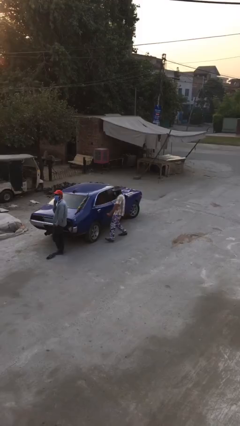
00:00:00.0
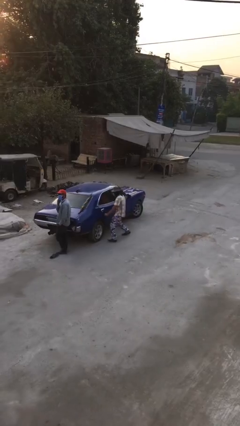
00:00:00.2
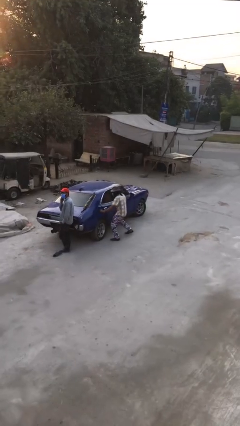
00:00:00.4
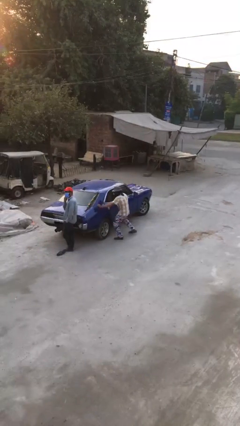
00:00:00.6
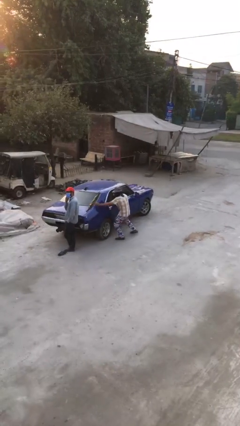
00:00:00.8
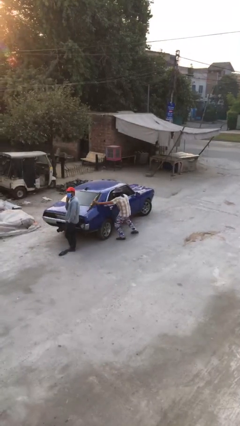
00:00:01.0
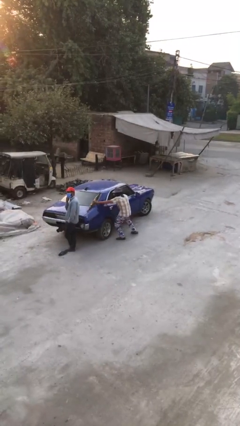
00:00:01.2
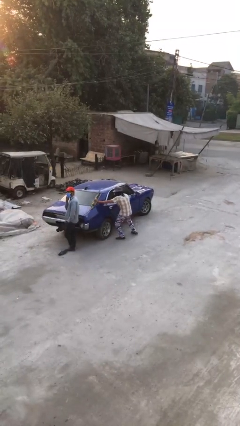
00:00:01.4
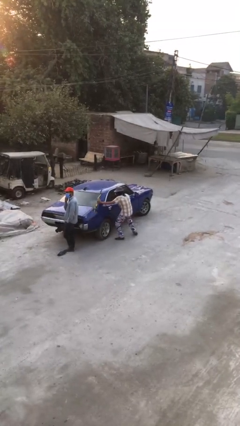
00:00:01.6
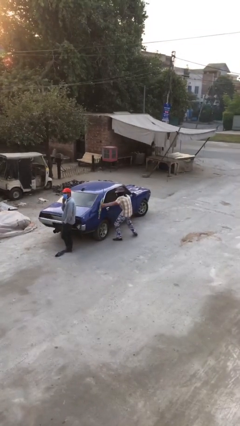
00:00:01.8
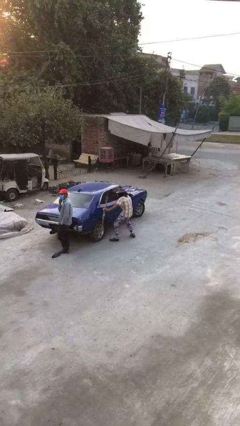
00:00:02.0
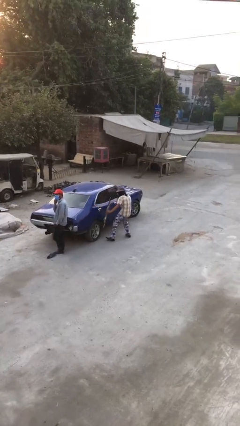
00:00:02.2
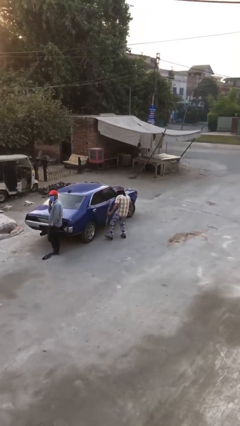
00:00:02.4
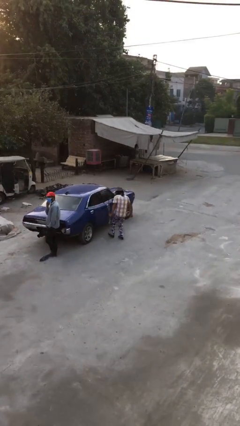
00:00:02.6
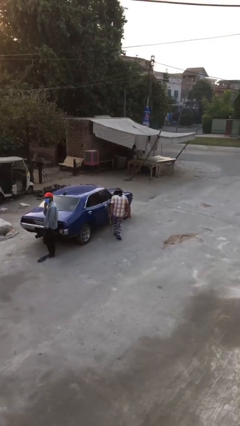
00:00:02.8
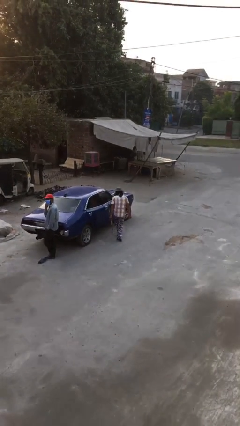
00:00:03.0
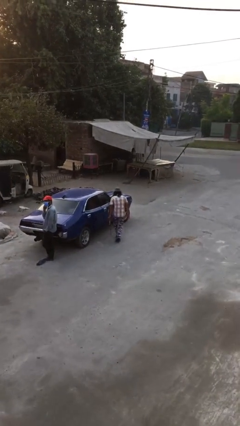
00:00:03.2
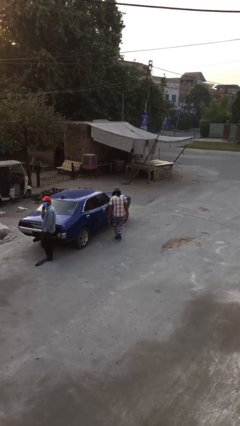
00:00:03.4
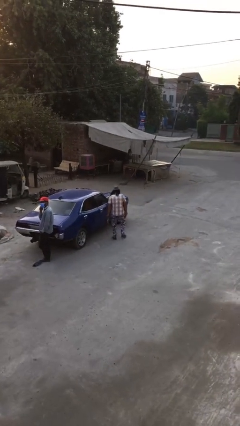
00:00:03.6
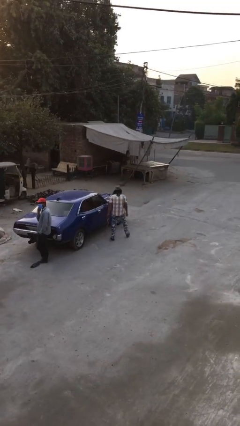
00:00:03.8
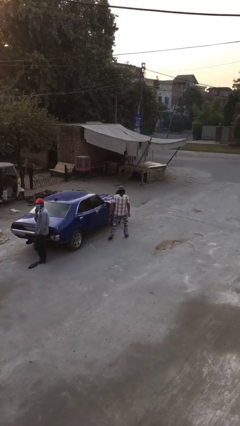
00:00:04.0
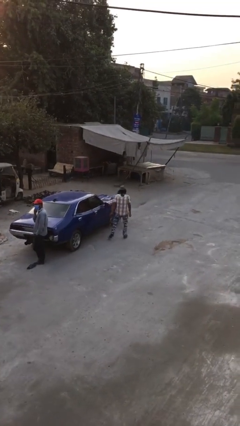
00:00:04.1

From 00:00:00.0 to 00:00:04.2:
person steals object from person

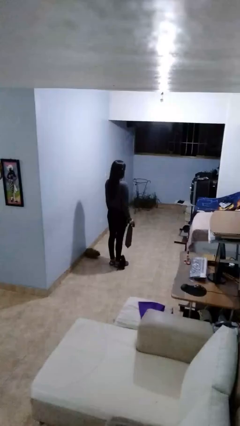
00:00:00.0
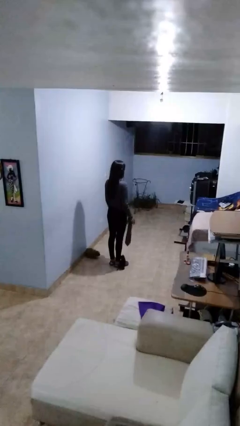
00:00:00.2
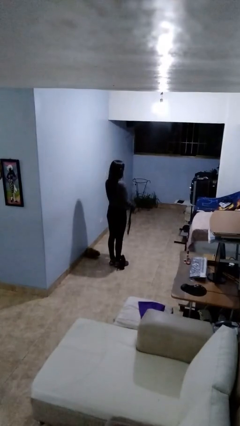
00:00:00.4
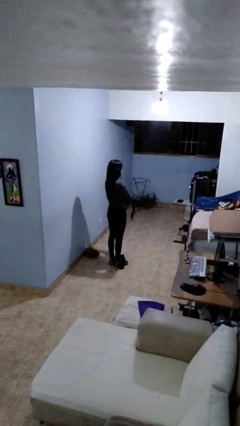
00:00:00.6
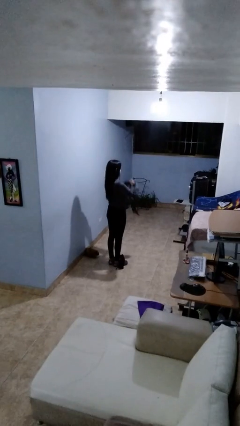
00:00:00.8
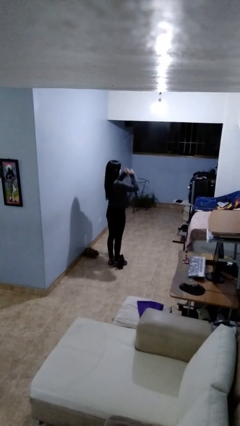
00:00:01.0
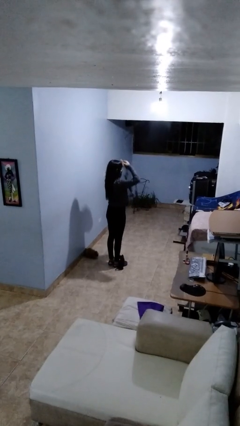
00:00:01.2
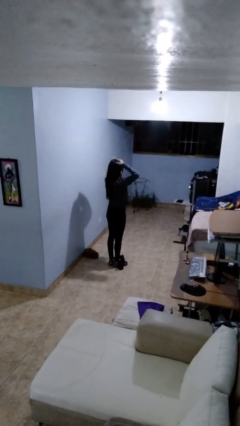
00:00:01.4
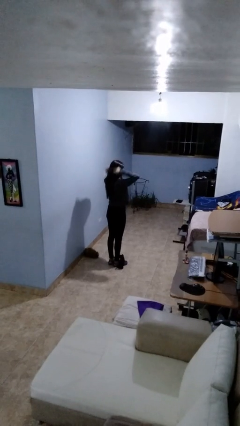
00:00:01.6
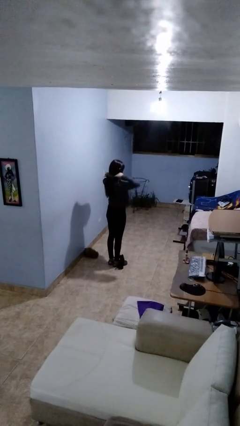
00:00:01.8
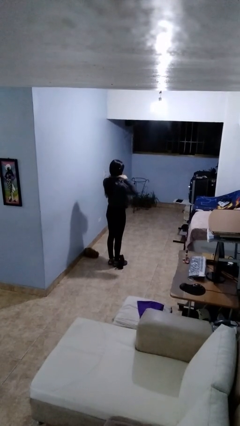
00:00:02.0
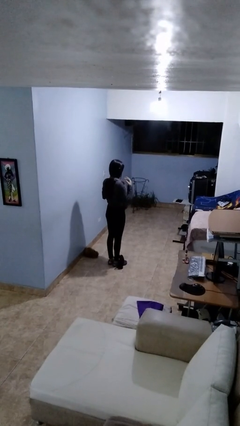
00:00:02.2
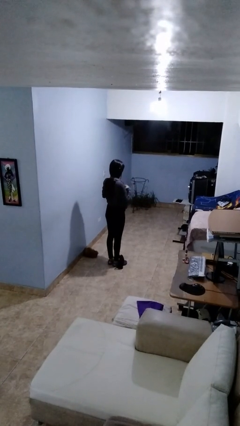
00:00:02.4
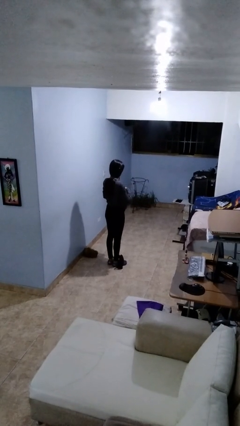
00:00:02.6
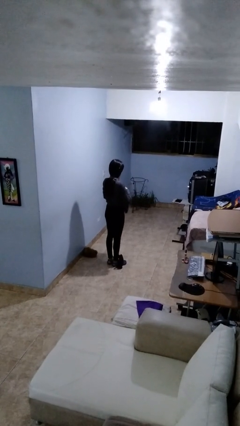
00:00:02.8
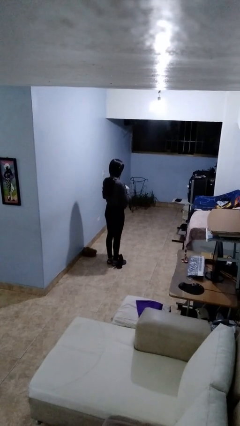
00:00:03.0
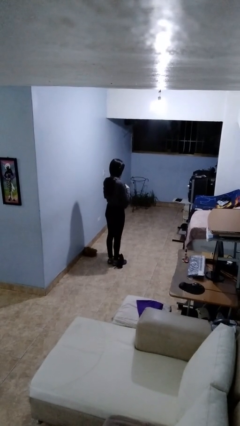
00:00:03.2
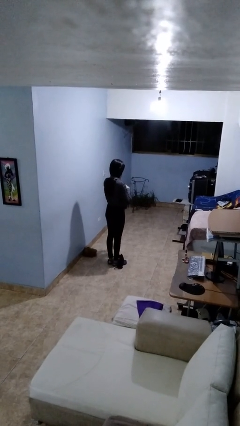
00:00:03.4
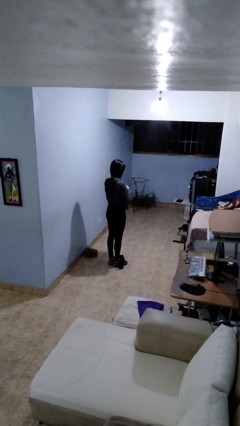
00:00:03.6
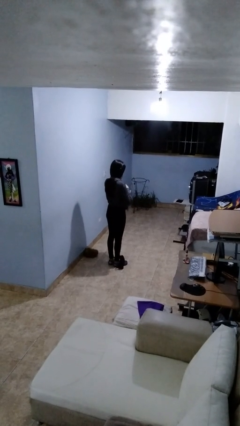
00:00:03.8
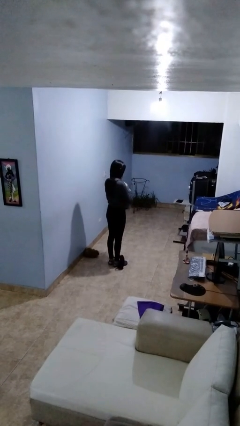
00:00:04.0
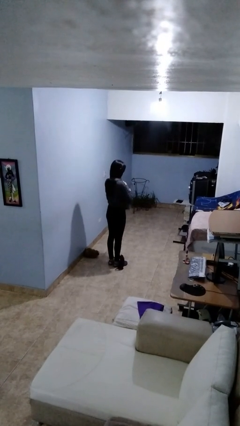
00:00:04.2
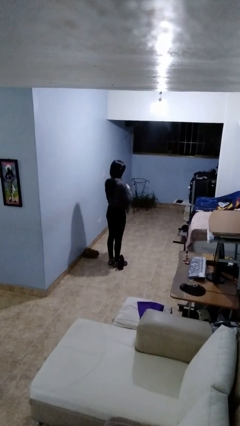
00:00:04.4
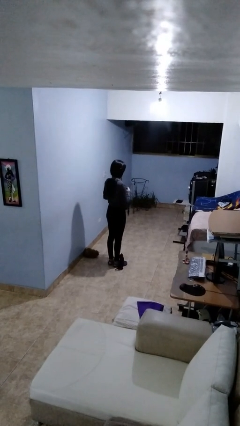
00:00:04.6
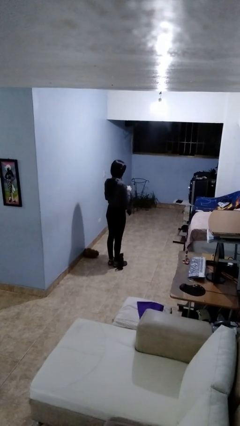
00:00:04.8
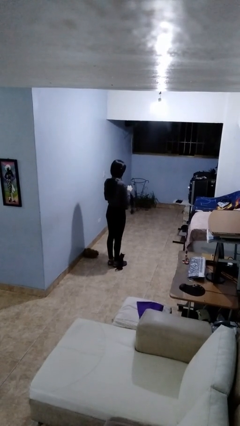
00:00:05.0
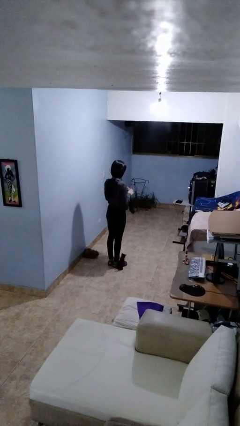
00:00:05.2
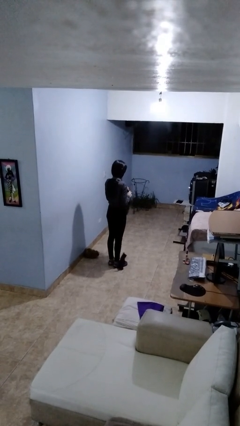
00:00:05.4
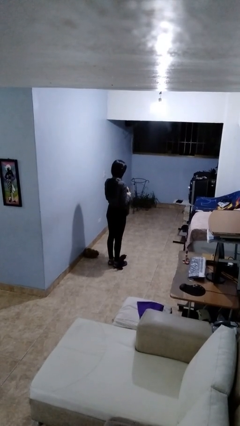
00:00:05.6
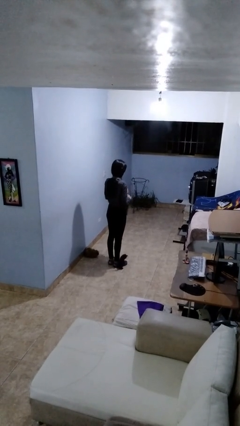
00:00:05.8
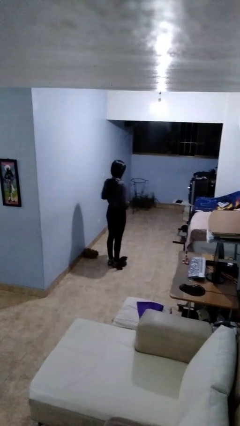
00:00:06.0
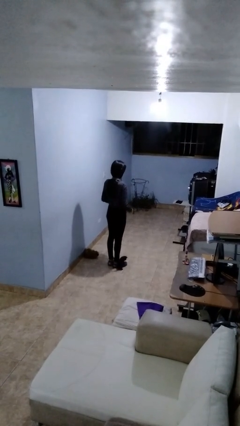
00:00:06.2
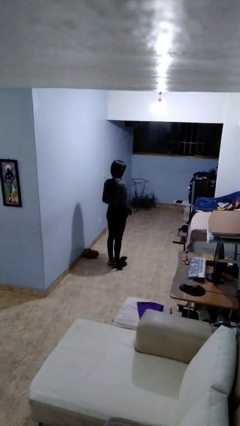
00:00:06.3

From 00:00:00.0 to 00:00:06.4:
person puts on necktie

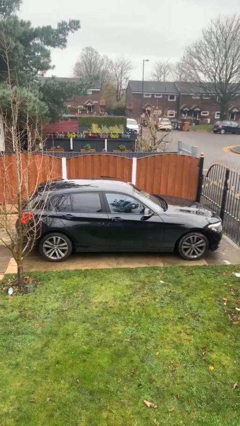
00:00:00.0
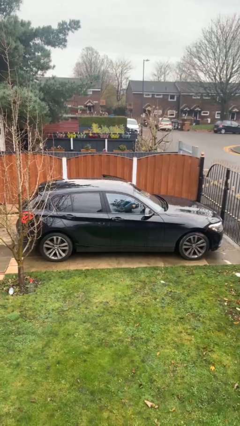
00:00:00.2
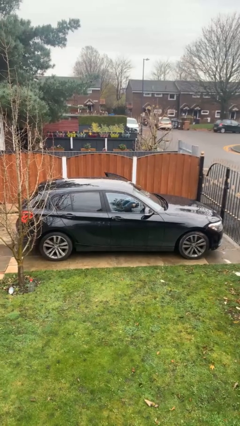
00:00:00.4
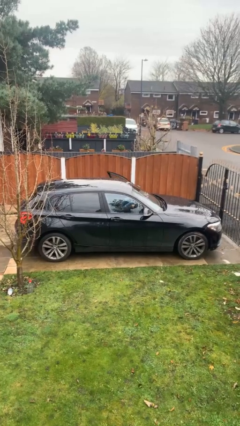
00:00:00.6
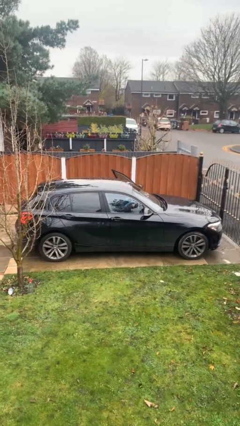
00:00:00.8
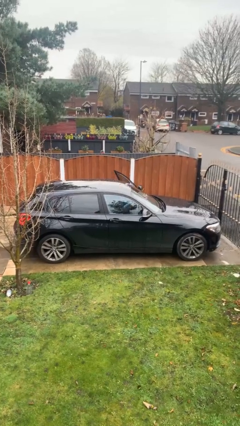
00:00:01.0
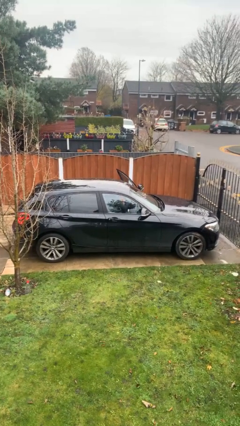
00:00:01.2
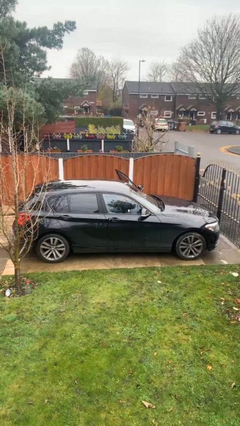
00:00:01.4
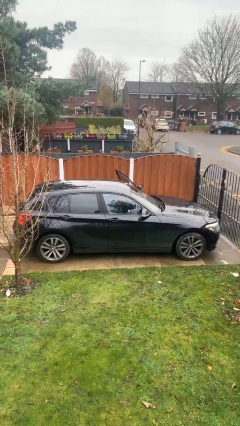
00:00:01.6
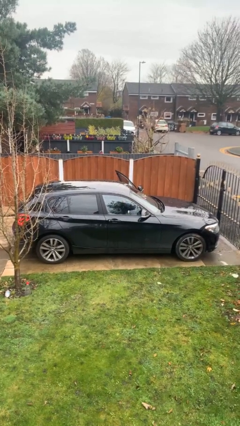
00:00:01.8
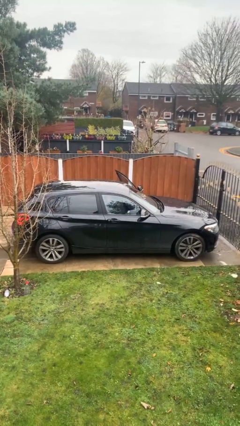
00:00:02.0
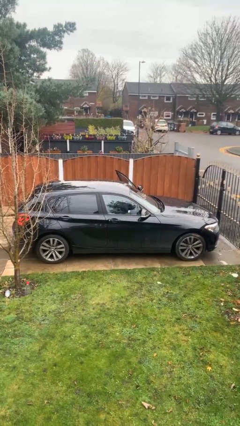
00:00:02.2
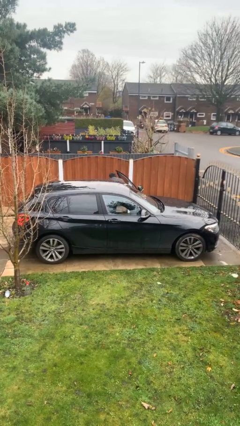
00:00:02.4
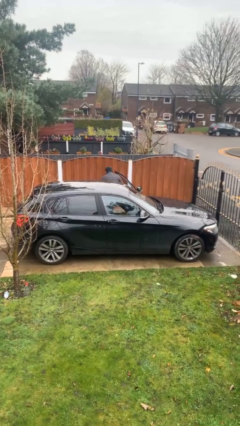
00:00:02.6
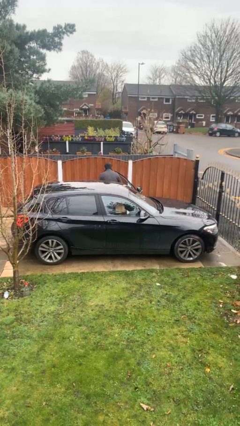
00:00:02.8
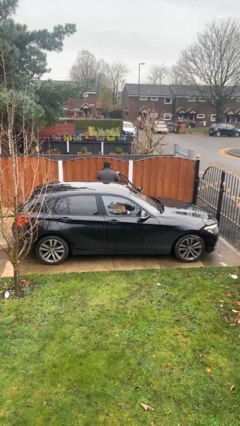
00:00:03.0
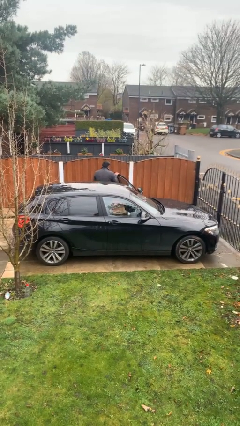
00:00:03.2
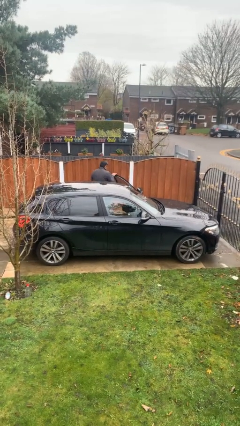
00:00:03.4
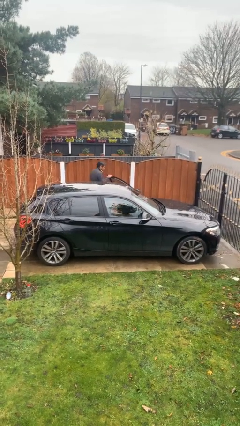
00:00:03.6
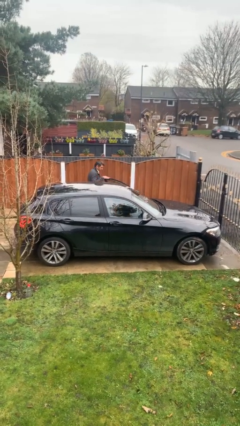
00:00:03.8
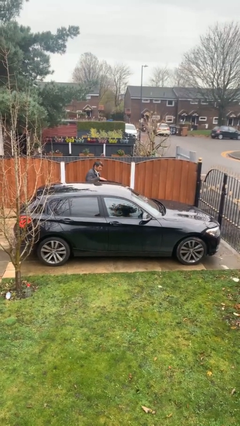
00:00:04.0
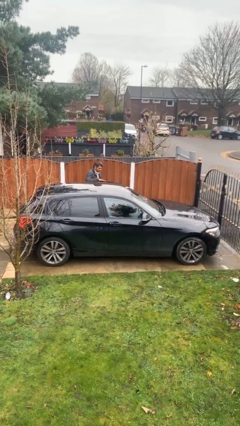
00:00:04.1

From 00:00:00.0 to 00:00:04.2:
car drops off person

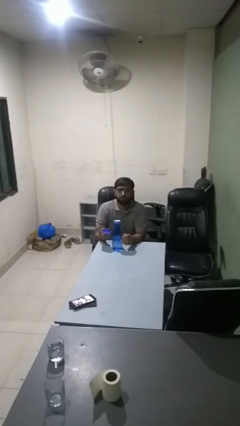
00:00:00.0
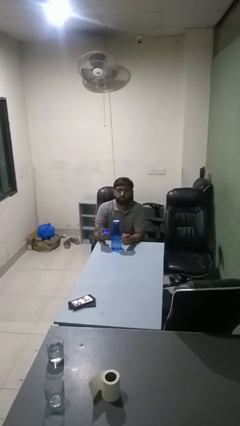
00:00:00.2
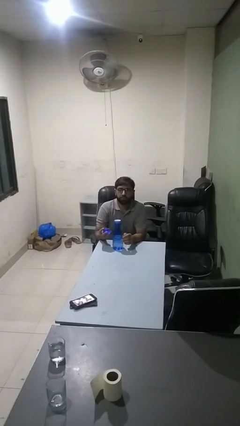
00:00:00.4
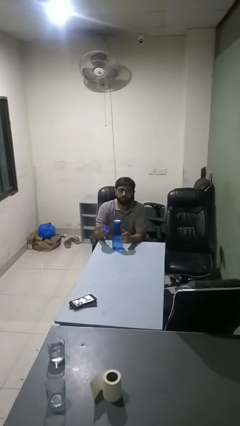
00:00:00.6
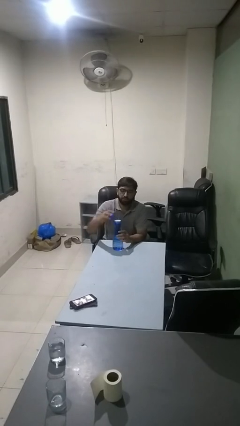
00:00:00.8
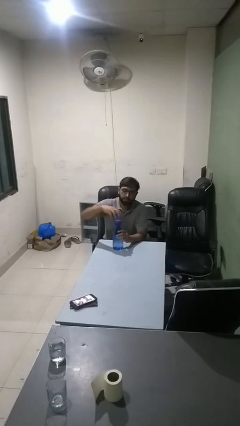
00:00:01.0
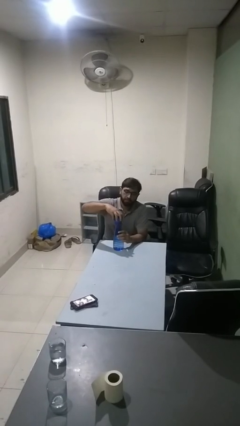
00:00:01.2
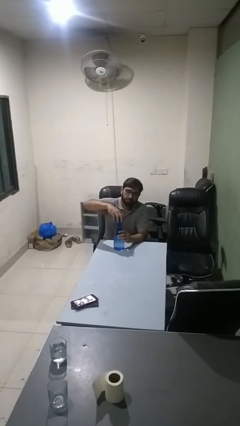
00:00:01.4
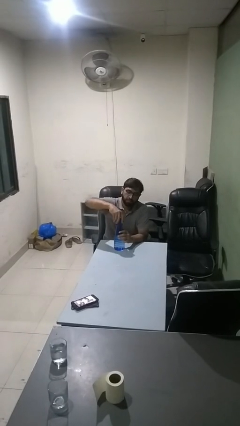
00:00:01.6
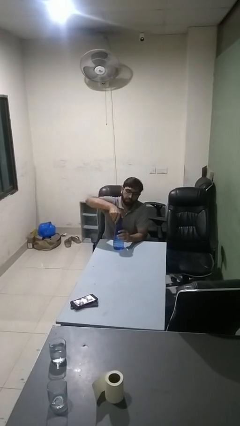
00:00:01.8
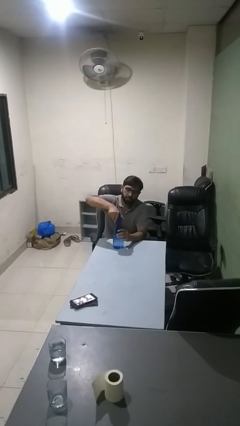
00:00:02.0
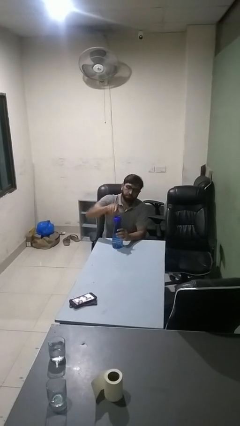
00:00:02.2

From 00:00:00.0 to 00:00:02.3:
person screws lid to bottle
